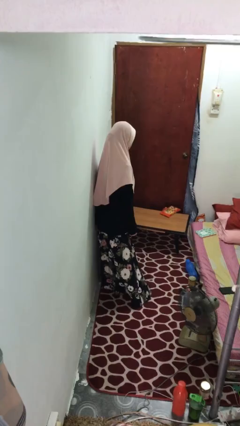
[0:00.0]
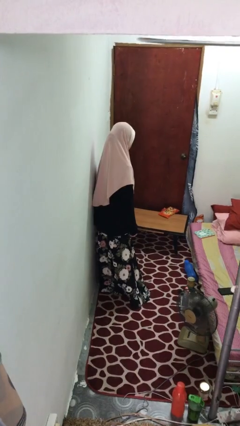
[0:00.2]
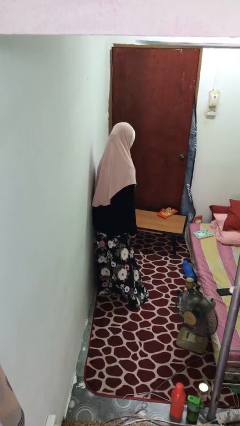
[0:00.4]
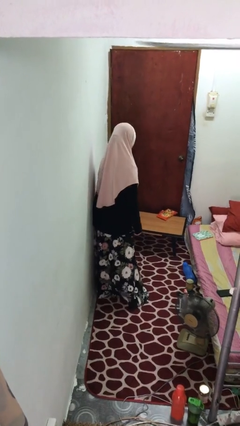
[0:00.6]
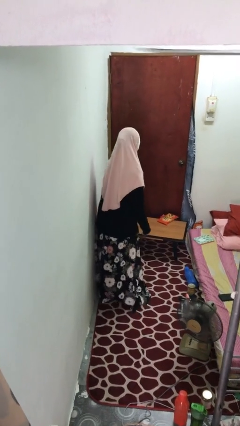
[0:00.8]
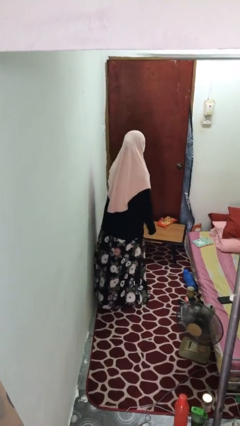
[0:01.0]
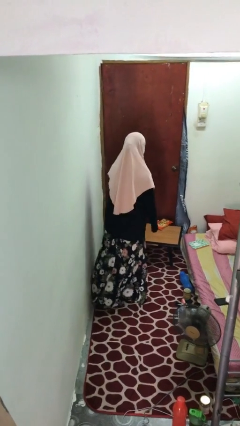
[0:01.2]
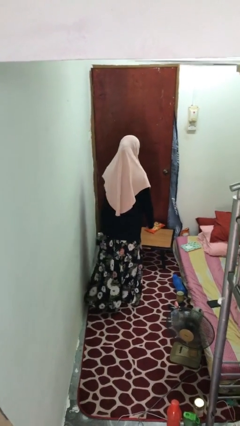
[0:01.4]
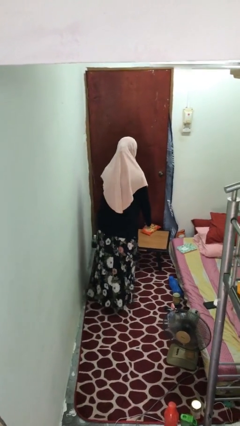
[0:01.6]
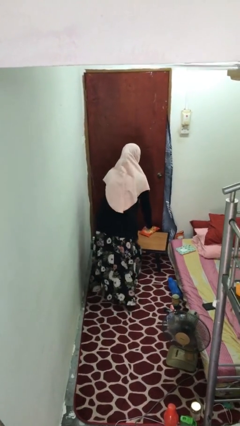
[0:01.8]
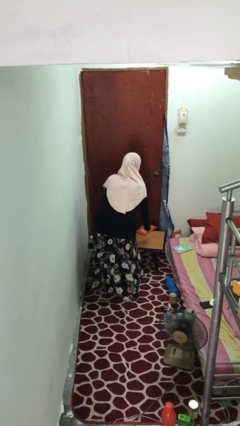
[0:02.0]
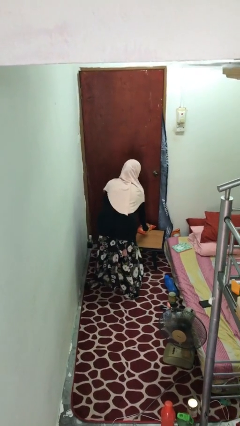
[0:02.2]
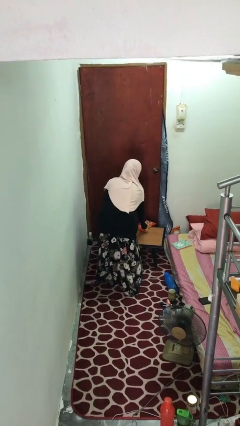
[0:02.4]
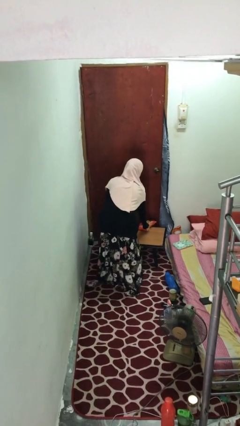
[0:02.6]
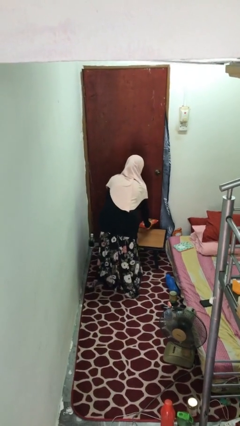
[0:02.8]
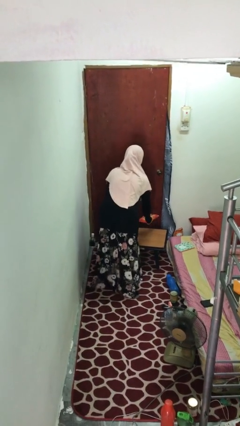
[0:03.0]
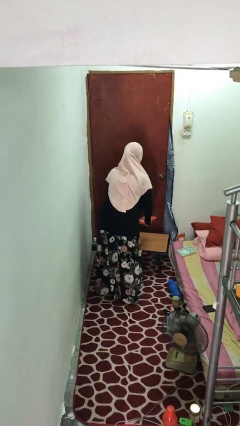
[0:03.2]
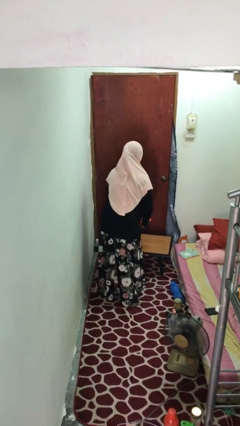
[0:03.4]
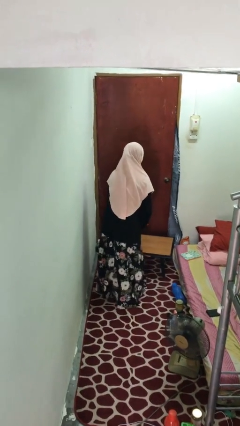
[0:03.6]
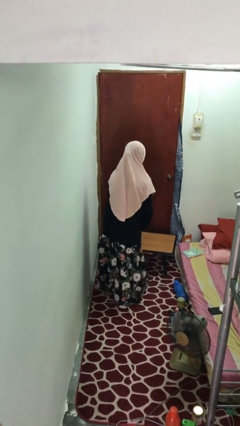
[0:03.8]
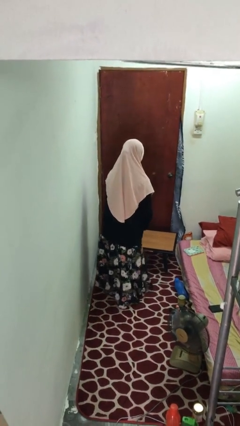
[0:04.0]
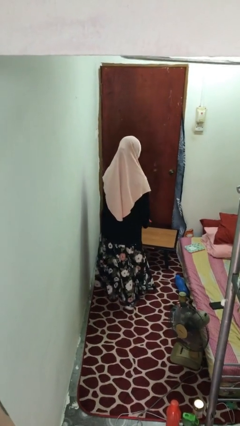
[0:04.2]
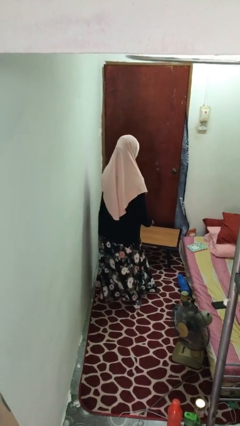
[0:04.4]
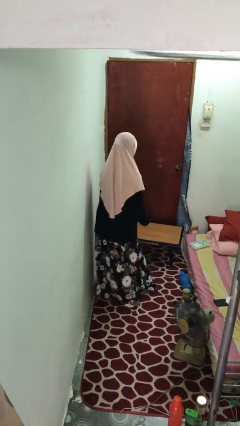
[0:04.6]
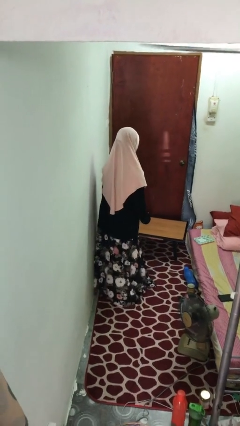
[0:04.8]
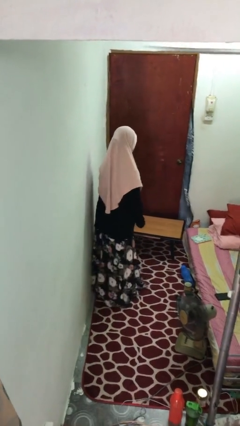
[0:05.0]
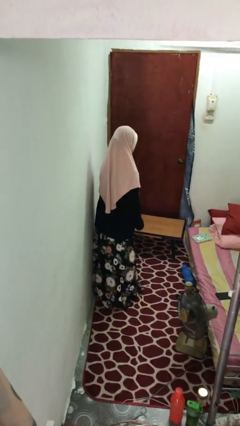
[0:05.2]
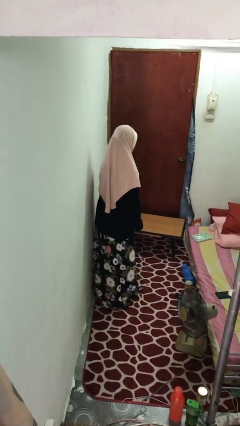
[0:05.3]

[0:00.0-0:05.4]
person picks up object from table

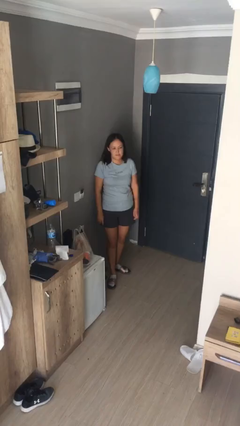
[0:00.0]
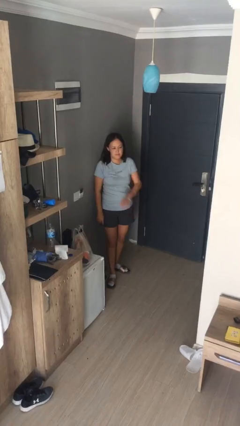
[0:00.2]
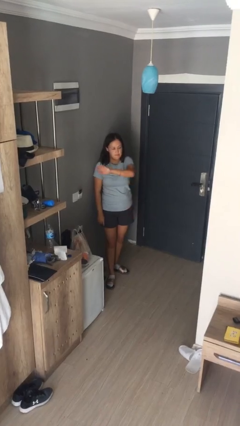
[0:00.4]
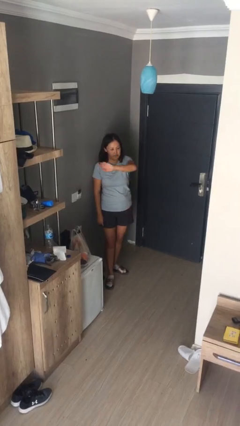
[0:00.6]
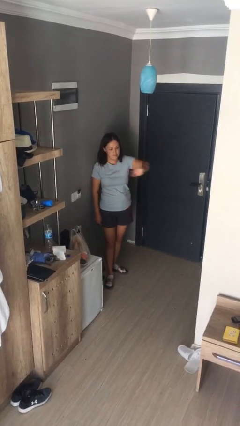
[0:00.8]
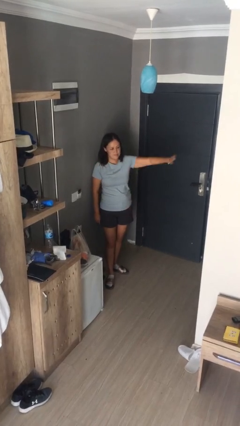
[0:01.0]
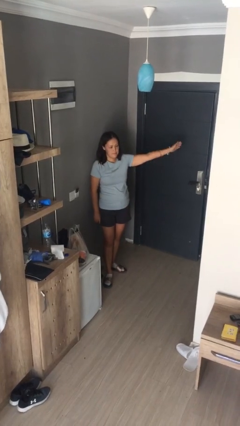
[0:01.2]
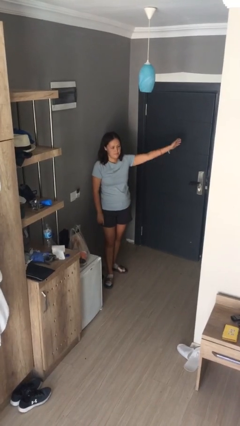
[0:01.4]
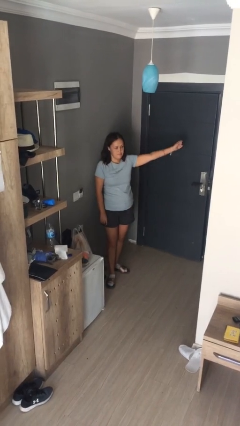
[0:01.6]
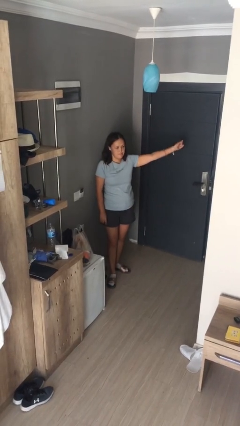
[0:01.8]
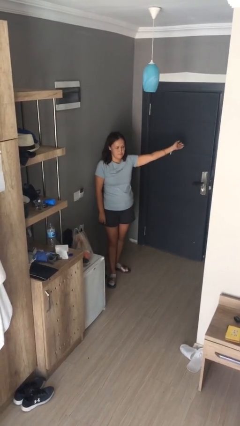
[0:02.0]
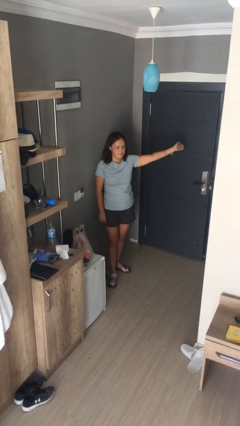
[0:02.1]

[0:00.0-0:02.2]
person gestures swipe left

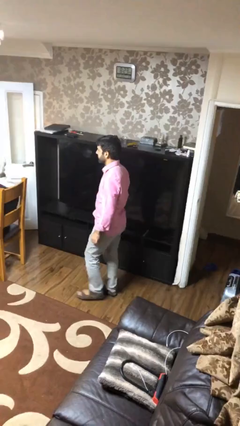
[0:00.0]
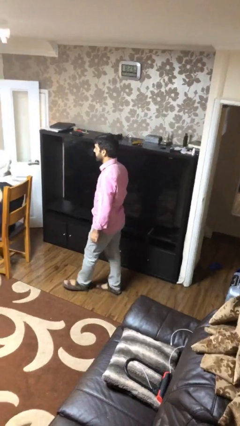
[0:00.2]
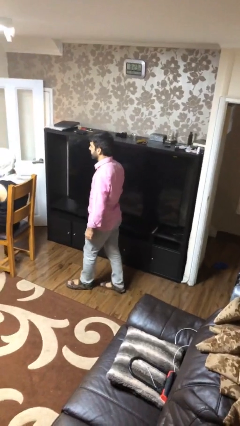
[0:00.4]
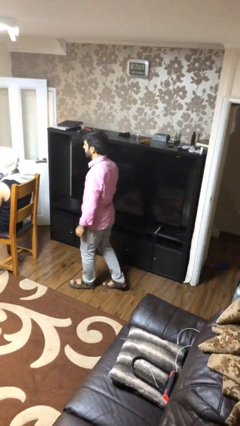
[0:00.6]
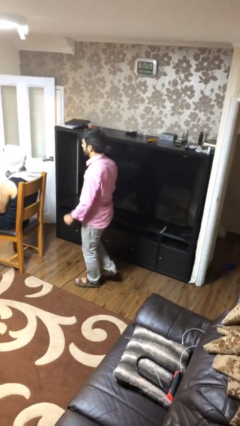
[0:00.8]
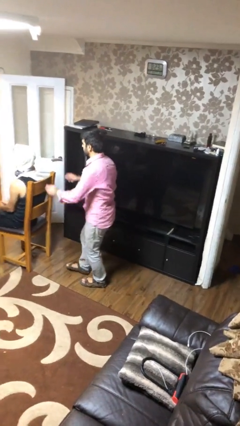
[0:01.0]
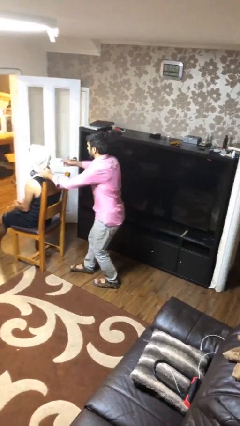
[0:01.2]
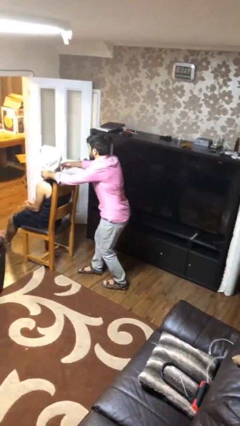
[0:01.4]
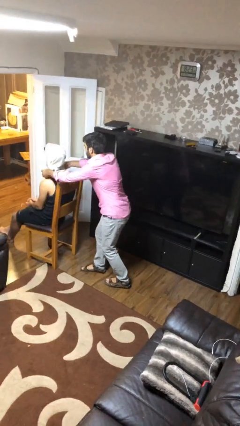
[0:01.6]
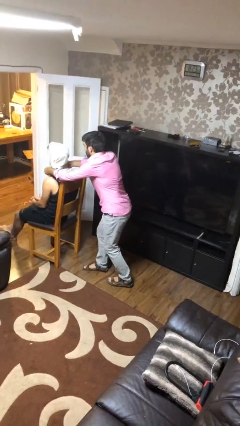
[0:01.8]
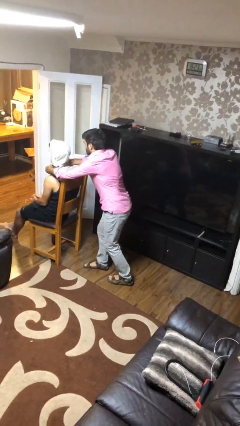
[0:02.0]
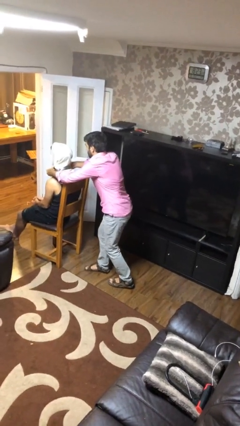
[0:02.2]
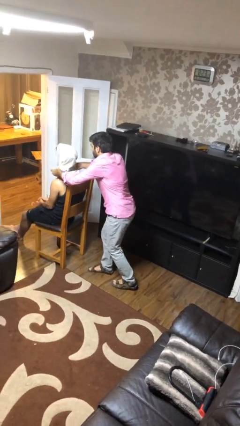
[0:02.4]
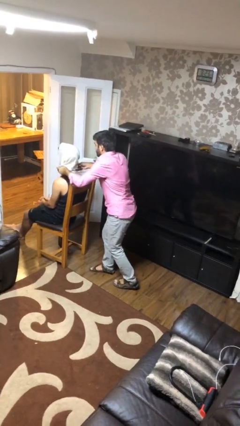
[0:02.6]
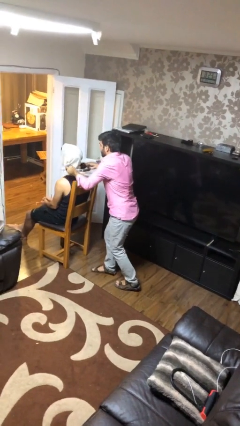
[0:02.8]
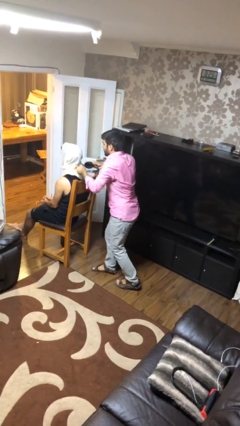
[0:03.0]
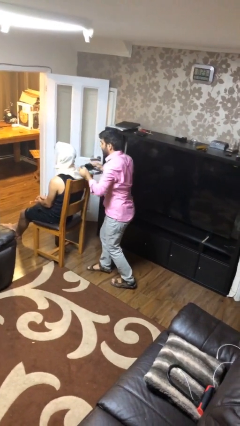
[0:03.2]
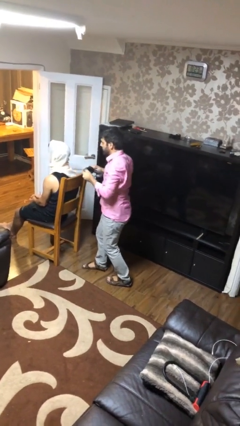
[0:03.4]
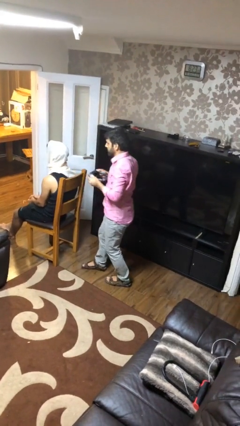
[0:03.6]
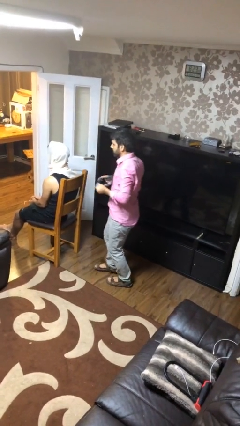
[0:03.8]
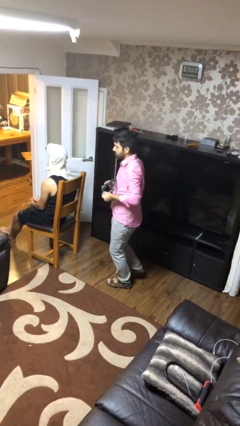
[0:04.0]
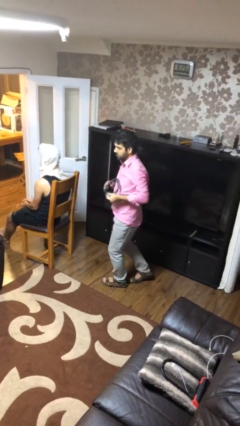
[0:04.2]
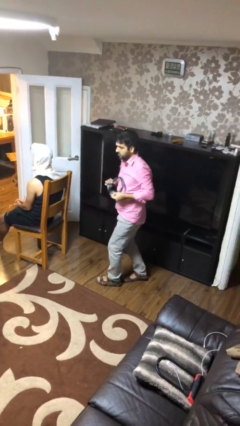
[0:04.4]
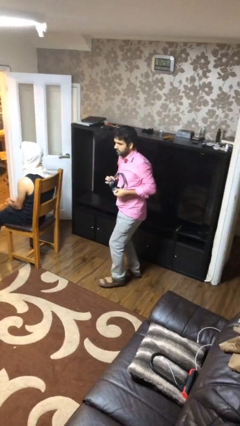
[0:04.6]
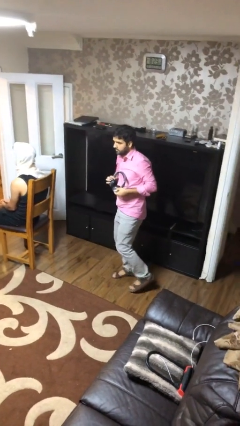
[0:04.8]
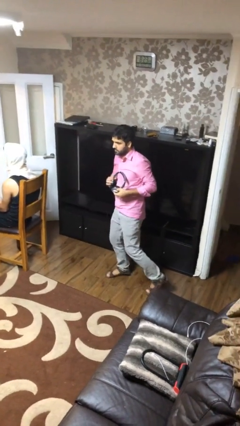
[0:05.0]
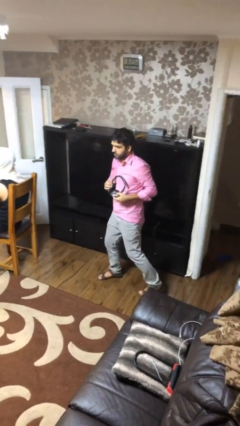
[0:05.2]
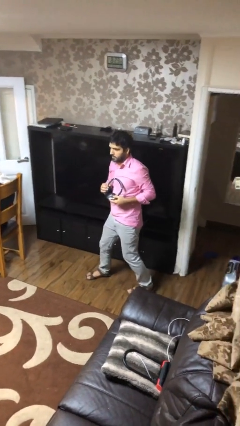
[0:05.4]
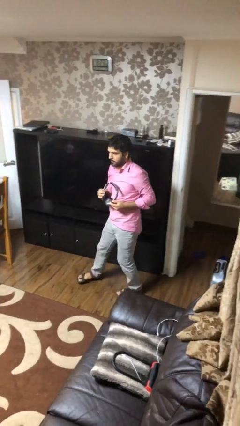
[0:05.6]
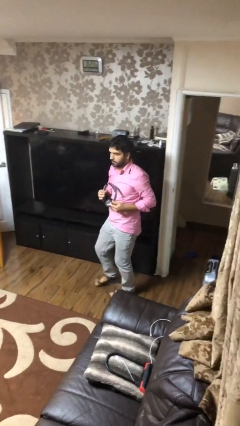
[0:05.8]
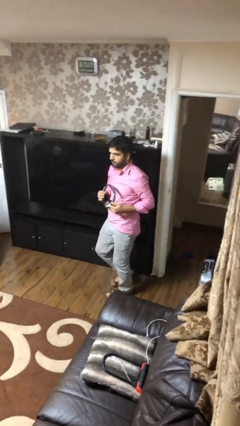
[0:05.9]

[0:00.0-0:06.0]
person steals object from person

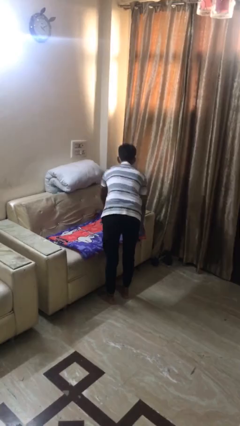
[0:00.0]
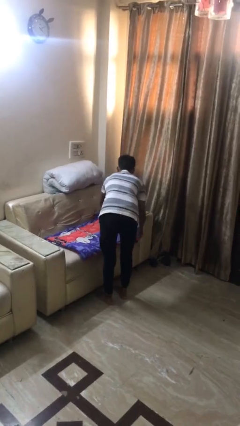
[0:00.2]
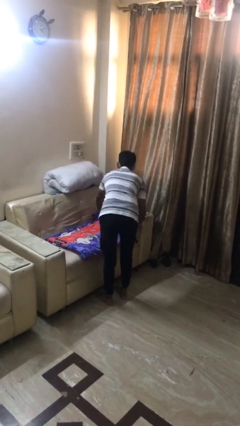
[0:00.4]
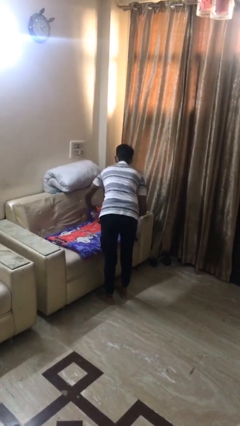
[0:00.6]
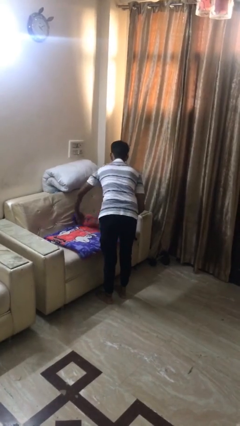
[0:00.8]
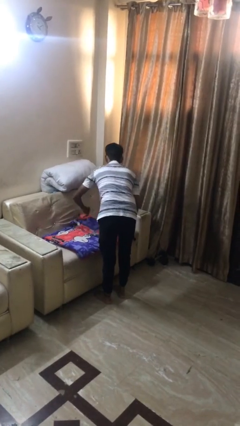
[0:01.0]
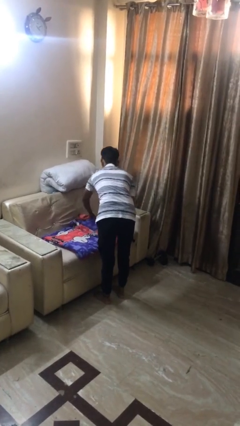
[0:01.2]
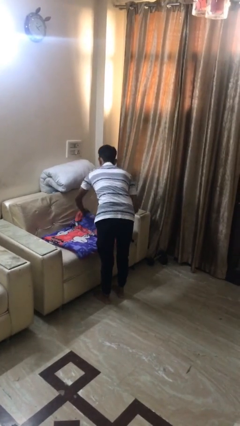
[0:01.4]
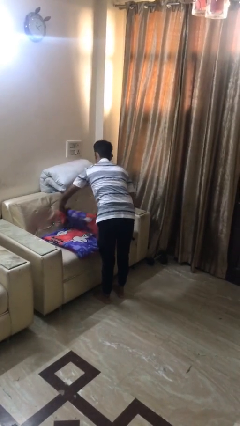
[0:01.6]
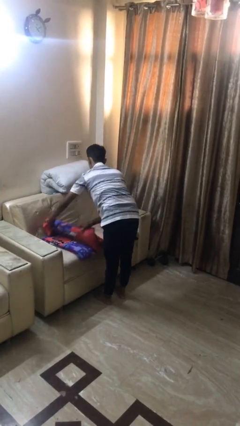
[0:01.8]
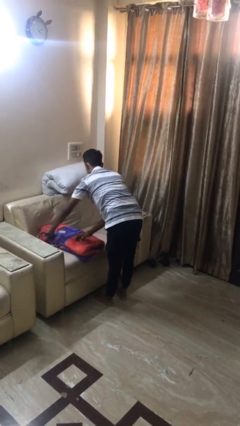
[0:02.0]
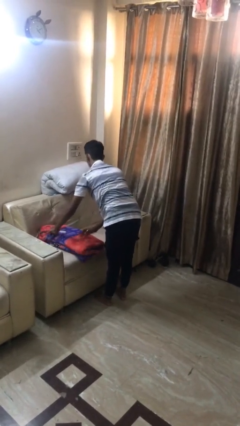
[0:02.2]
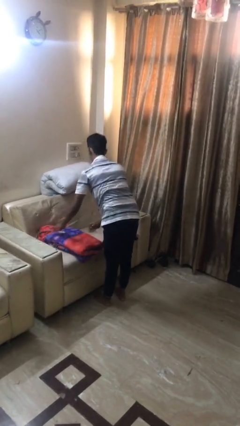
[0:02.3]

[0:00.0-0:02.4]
person folds blanket

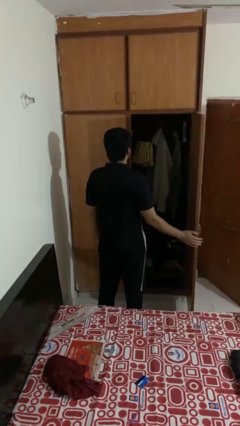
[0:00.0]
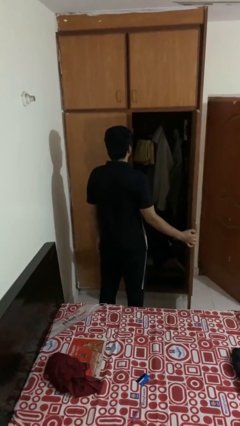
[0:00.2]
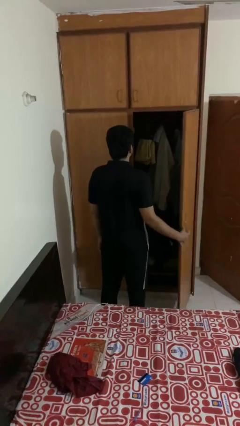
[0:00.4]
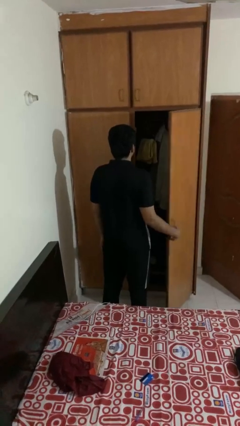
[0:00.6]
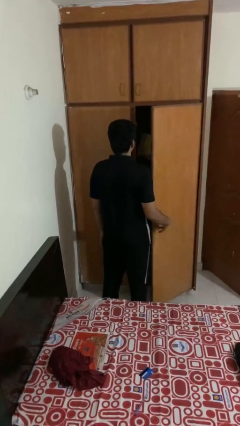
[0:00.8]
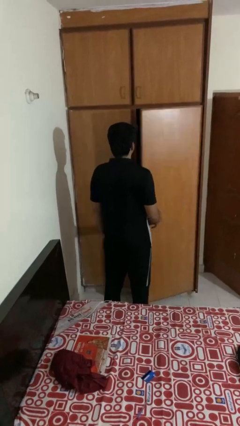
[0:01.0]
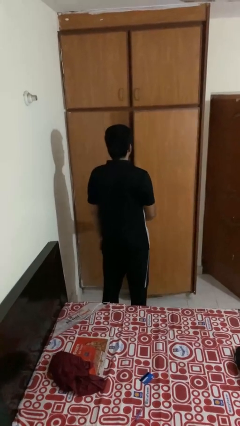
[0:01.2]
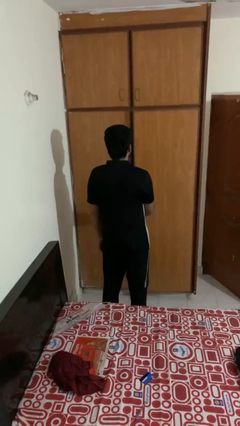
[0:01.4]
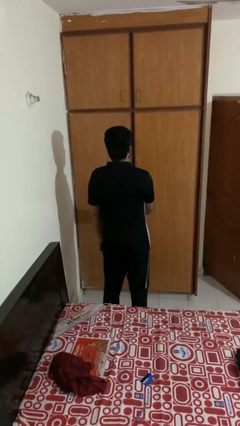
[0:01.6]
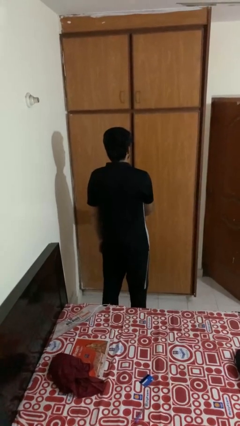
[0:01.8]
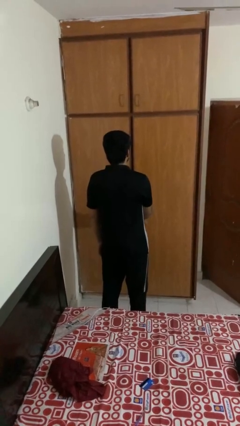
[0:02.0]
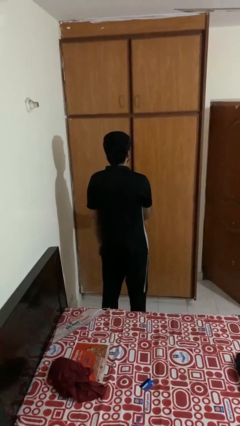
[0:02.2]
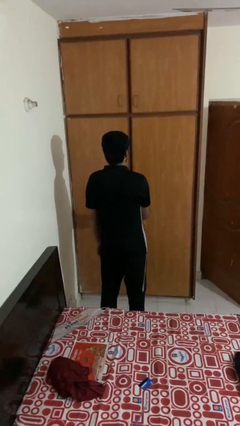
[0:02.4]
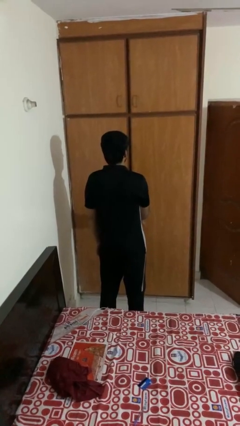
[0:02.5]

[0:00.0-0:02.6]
person closes closet door
